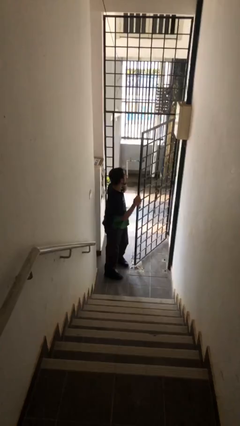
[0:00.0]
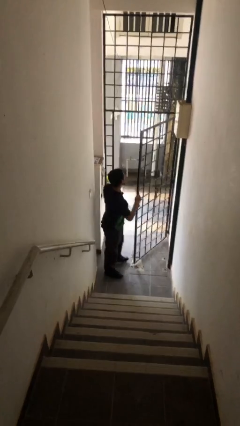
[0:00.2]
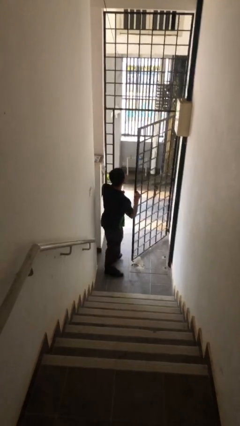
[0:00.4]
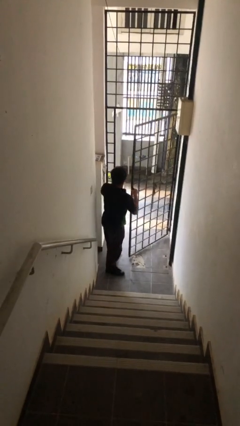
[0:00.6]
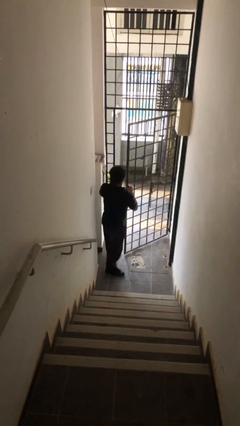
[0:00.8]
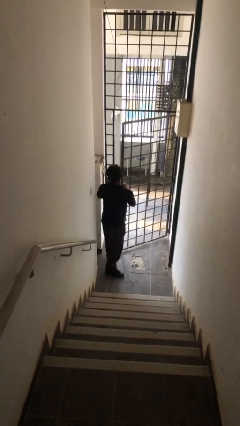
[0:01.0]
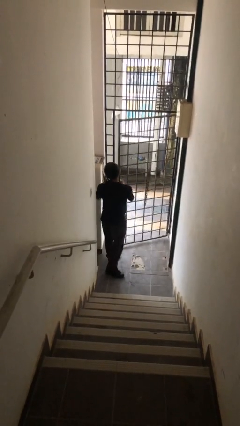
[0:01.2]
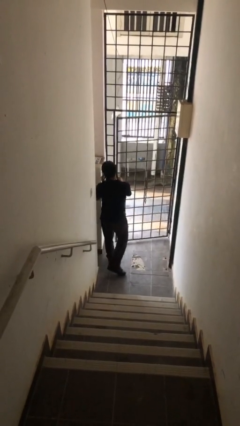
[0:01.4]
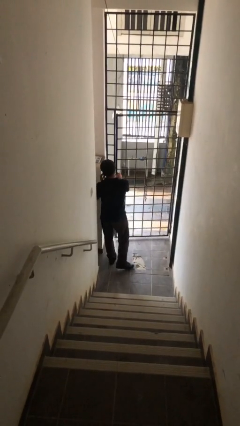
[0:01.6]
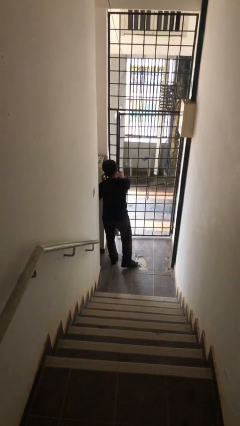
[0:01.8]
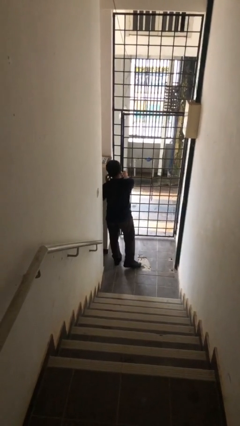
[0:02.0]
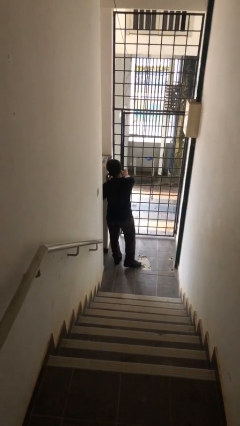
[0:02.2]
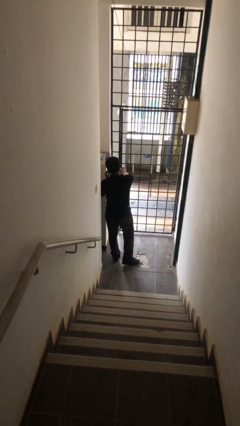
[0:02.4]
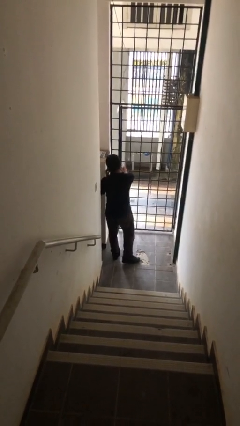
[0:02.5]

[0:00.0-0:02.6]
person closes facility door

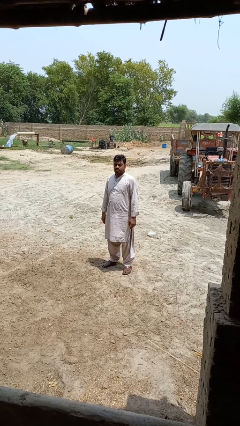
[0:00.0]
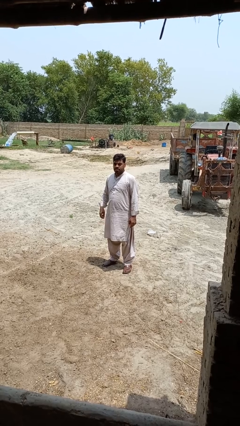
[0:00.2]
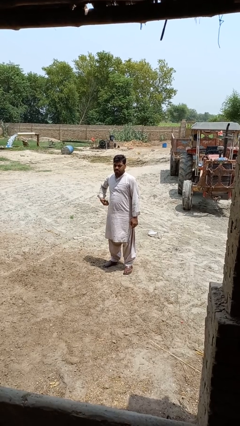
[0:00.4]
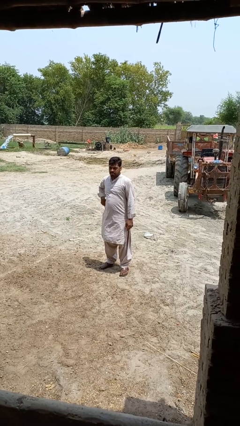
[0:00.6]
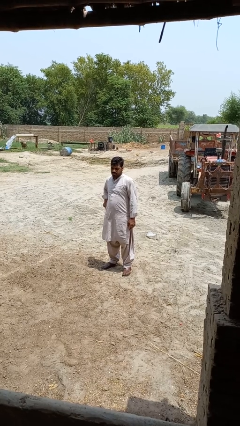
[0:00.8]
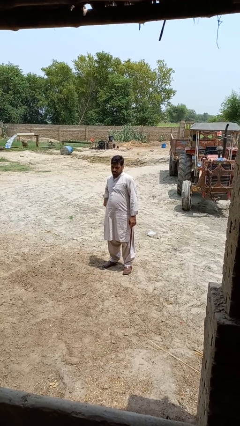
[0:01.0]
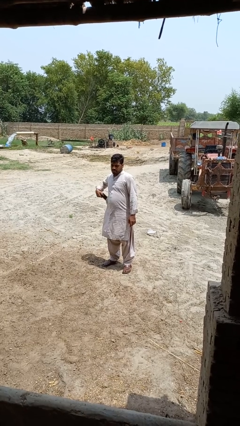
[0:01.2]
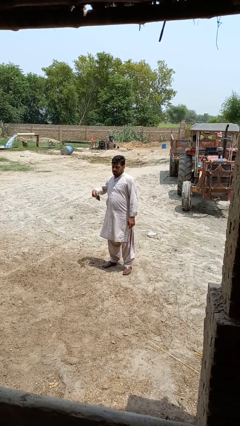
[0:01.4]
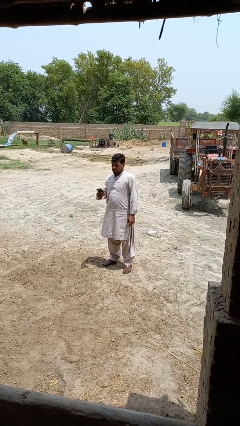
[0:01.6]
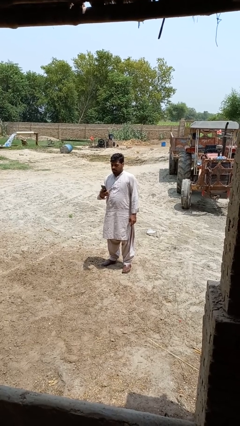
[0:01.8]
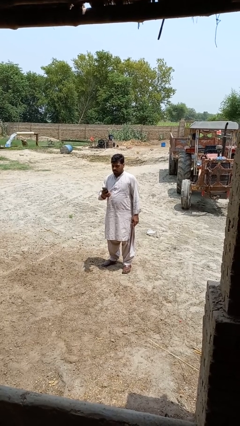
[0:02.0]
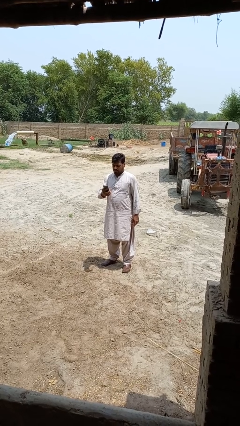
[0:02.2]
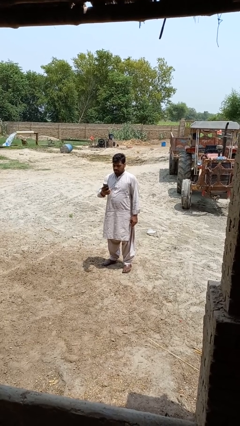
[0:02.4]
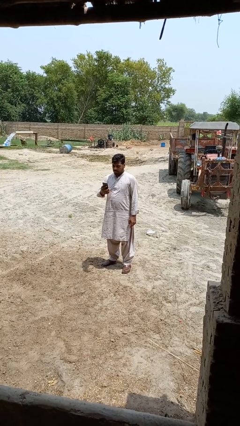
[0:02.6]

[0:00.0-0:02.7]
person takes phone from pocket

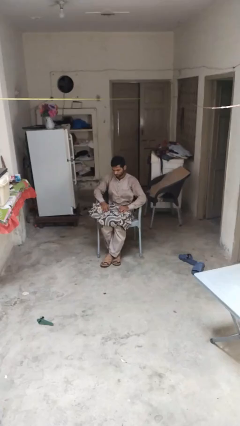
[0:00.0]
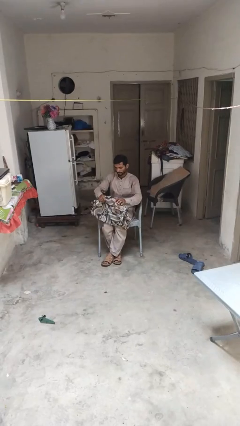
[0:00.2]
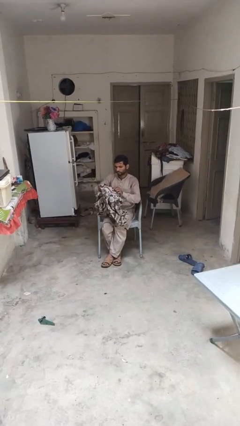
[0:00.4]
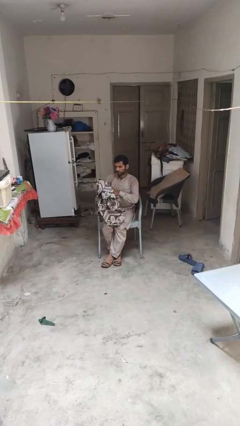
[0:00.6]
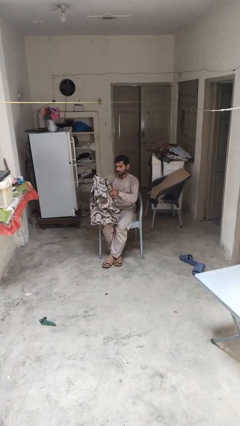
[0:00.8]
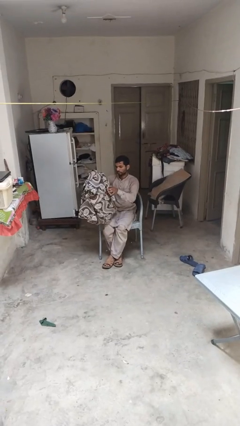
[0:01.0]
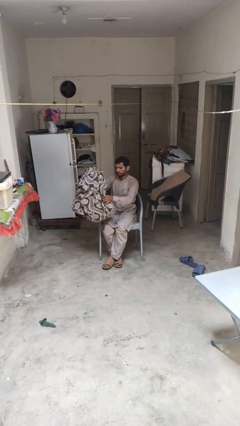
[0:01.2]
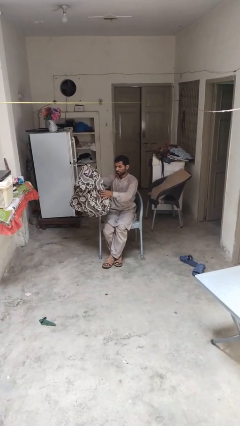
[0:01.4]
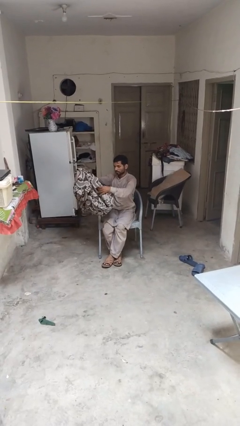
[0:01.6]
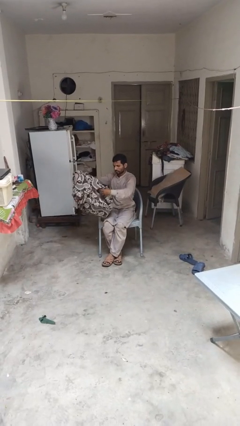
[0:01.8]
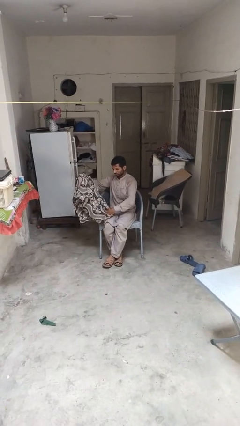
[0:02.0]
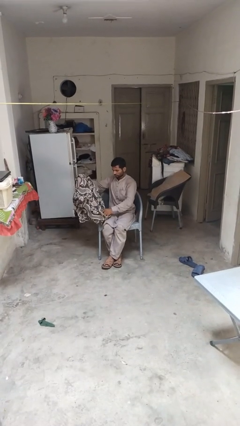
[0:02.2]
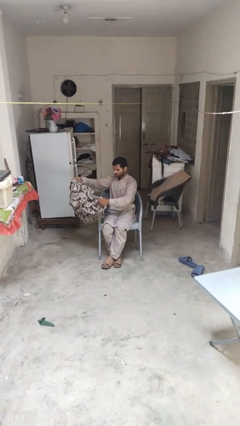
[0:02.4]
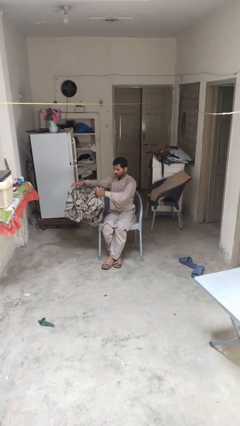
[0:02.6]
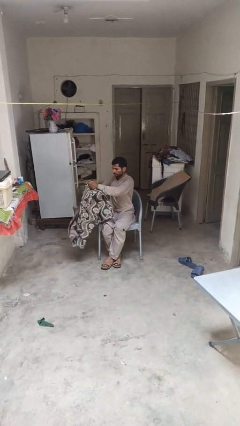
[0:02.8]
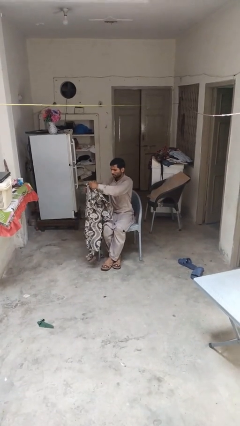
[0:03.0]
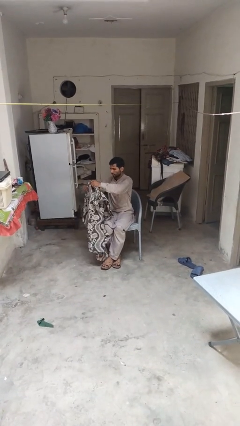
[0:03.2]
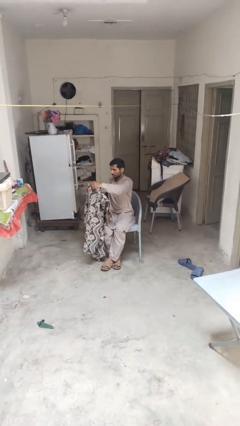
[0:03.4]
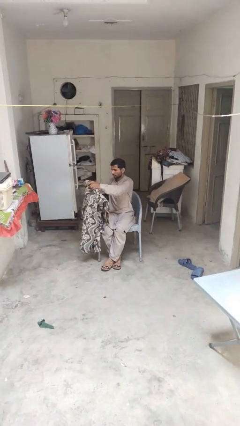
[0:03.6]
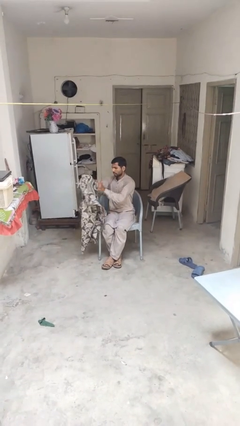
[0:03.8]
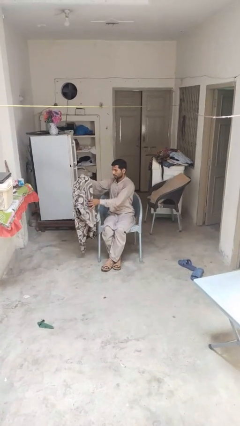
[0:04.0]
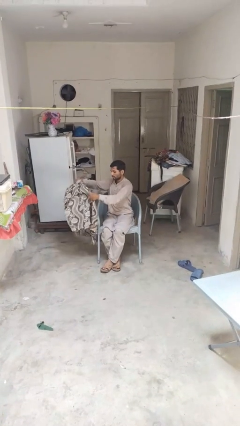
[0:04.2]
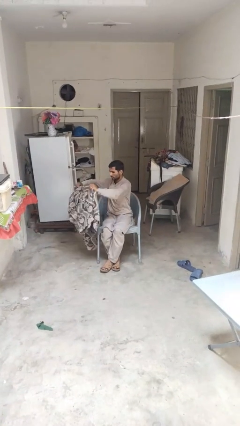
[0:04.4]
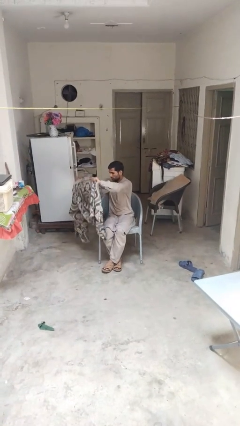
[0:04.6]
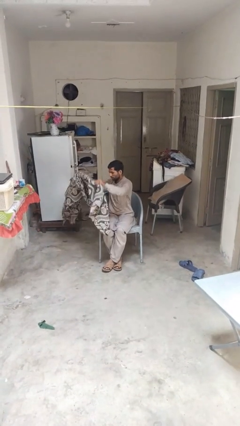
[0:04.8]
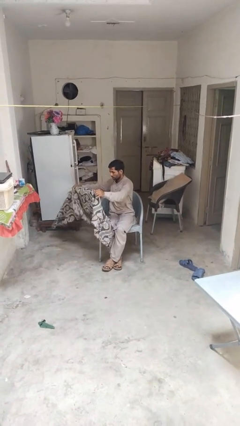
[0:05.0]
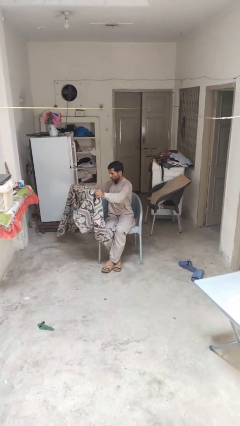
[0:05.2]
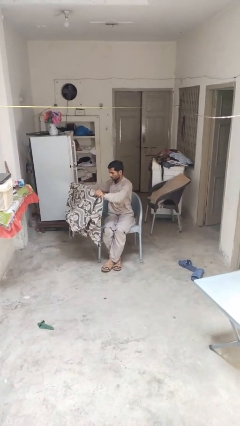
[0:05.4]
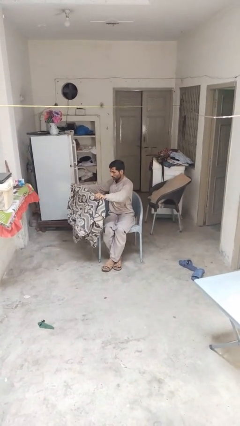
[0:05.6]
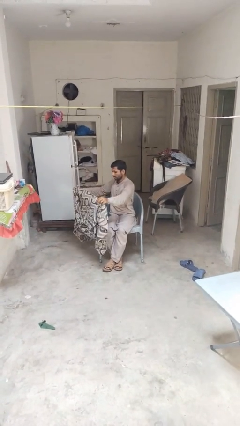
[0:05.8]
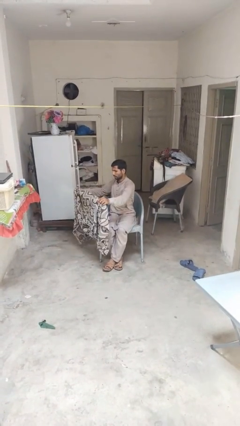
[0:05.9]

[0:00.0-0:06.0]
person unfolds blanket

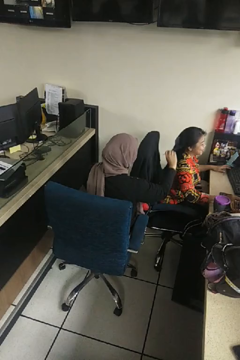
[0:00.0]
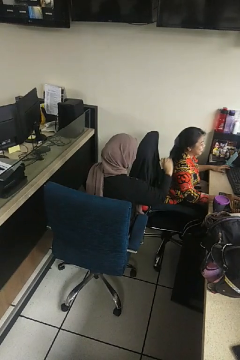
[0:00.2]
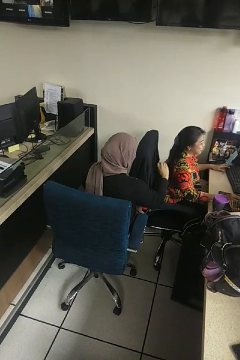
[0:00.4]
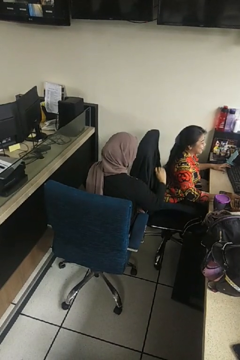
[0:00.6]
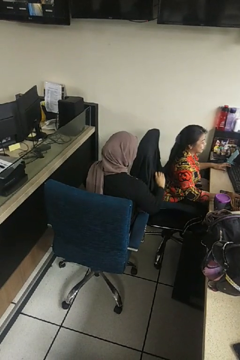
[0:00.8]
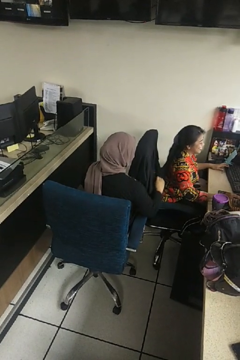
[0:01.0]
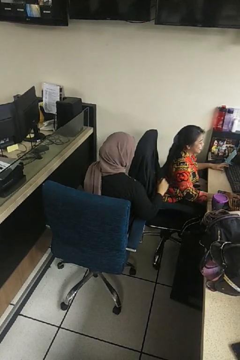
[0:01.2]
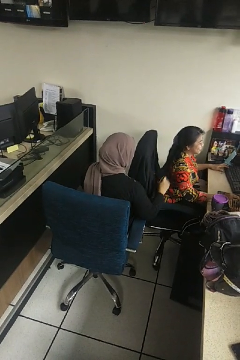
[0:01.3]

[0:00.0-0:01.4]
person brushes hair of person

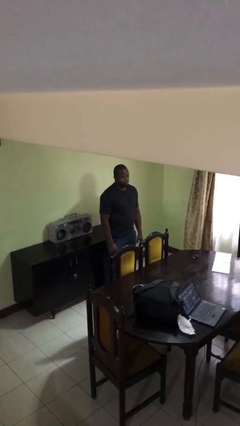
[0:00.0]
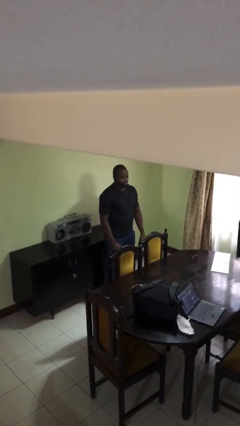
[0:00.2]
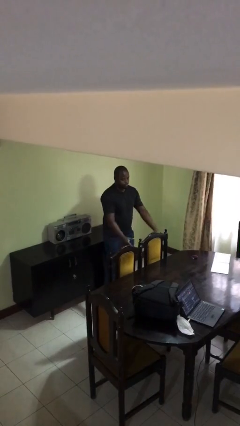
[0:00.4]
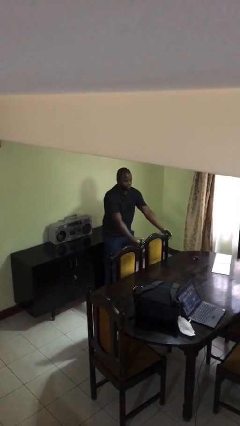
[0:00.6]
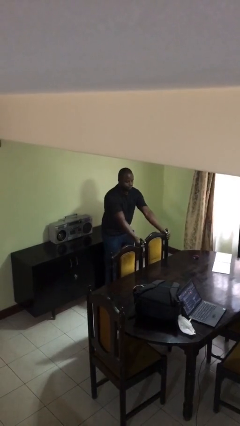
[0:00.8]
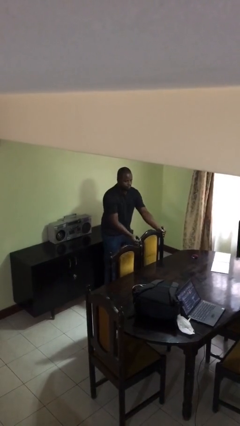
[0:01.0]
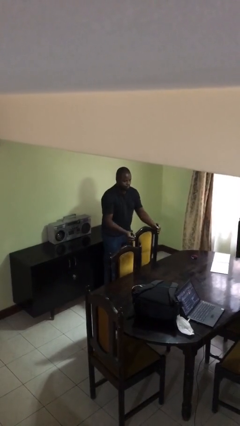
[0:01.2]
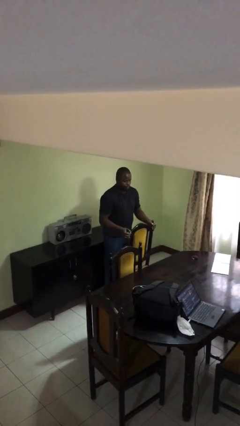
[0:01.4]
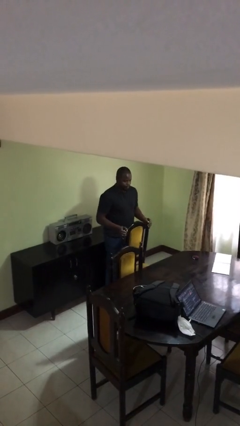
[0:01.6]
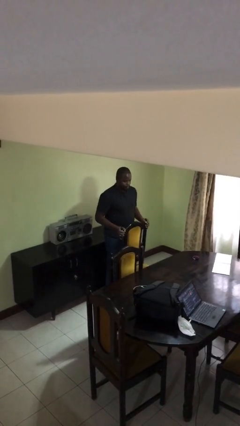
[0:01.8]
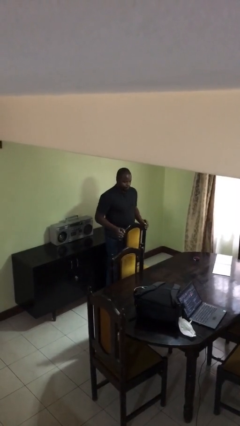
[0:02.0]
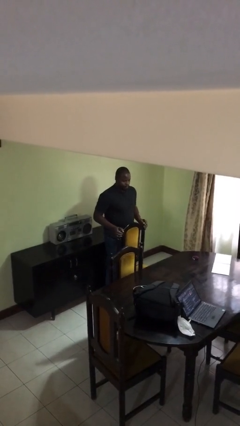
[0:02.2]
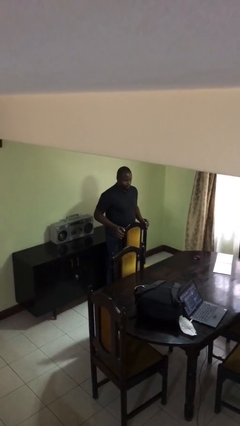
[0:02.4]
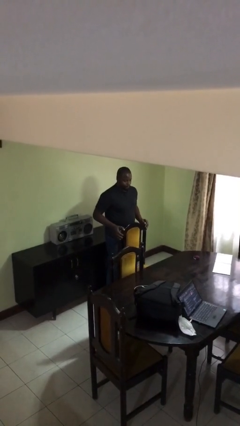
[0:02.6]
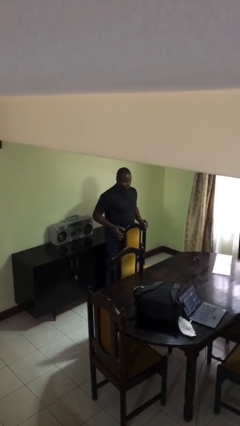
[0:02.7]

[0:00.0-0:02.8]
person pulls out chair

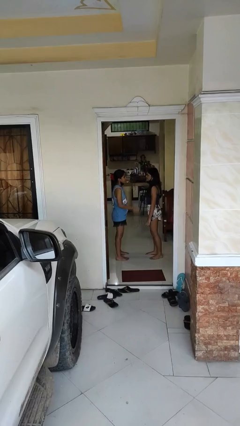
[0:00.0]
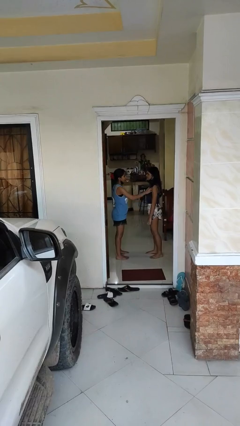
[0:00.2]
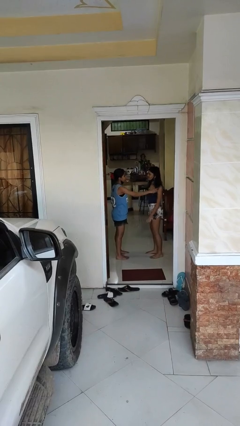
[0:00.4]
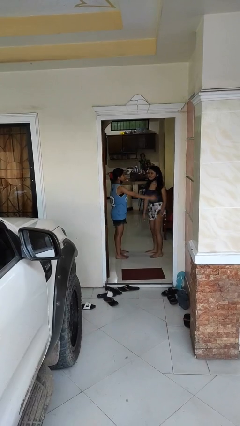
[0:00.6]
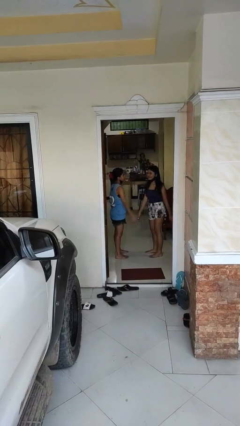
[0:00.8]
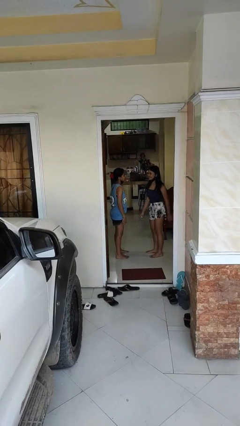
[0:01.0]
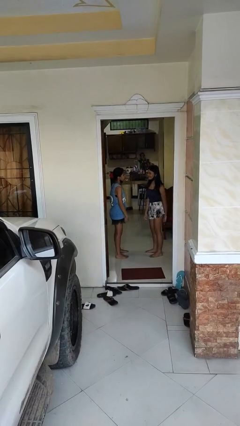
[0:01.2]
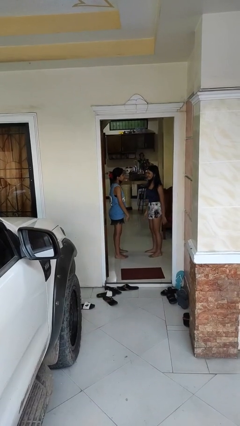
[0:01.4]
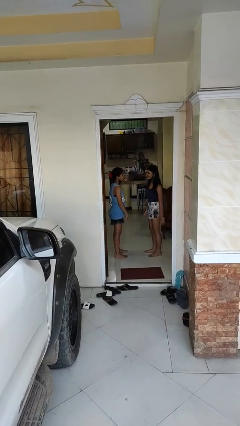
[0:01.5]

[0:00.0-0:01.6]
person shoves person

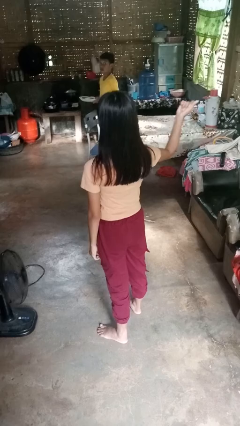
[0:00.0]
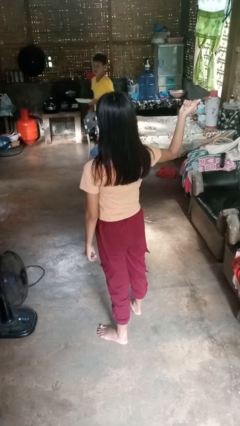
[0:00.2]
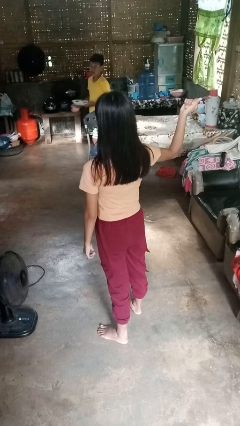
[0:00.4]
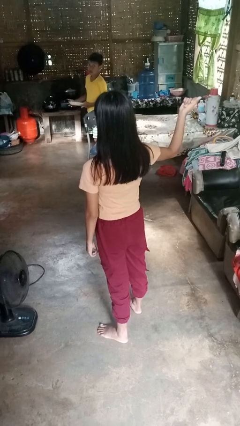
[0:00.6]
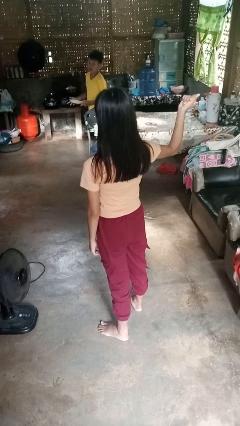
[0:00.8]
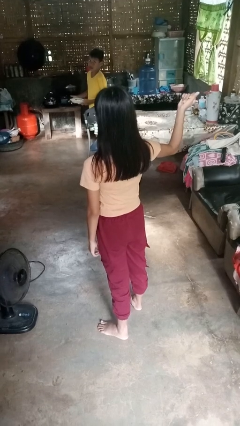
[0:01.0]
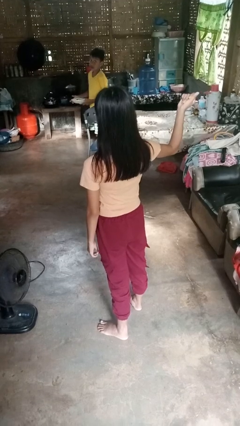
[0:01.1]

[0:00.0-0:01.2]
person snaps fingers
